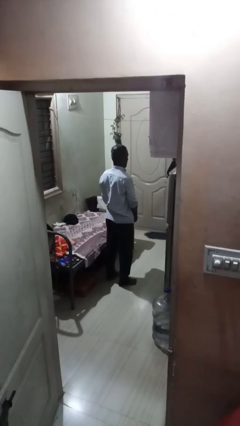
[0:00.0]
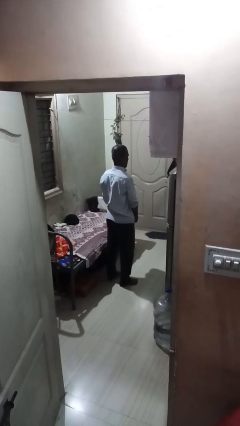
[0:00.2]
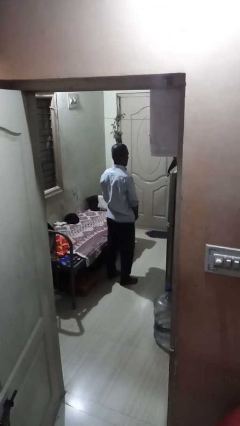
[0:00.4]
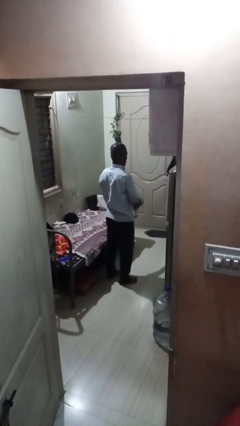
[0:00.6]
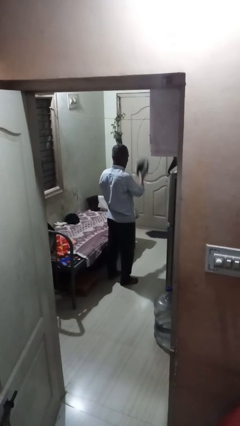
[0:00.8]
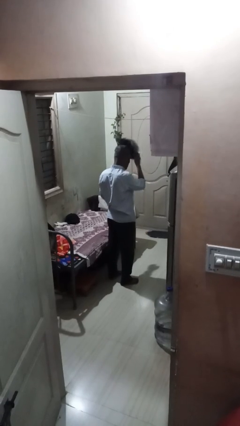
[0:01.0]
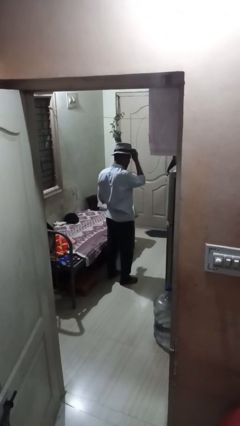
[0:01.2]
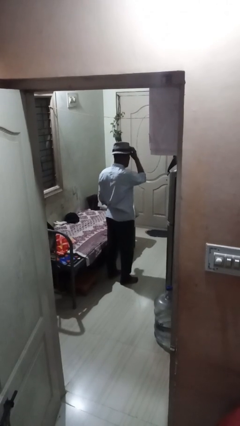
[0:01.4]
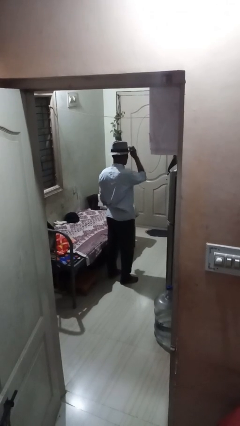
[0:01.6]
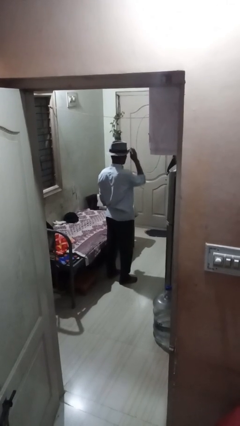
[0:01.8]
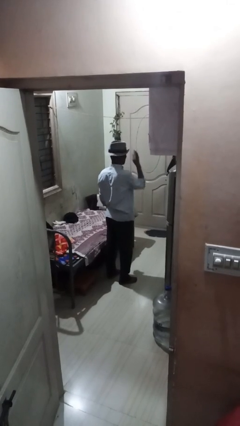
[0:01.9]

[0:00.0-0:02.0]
person puts on hat

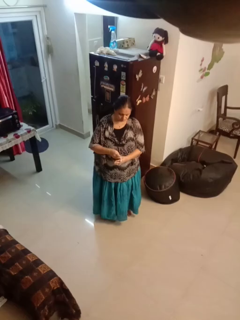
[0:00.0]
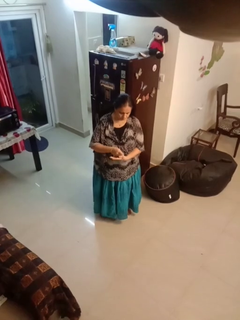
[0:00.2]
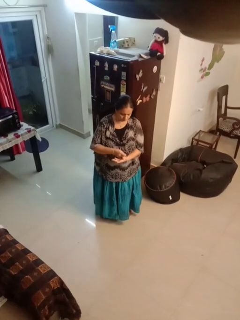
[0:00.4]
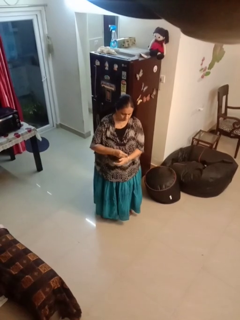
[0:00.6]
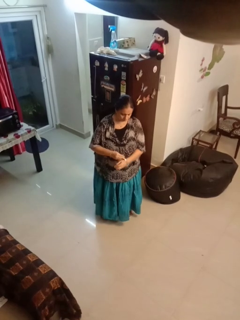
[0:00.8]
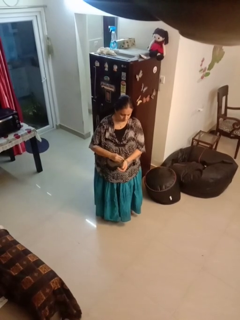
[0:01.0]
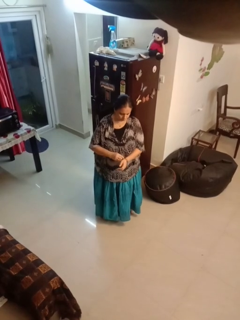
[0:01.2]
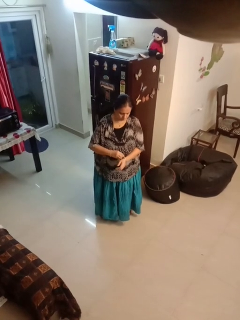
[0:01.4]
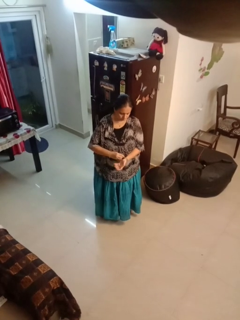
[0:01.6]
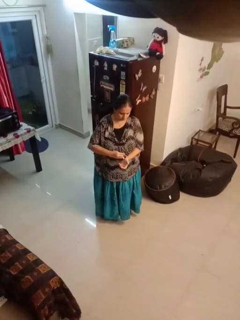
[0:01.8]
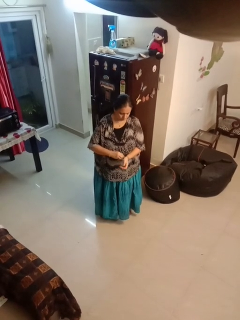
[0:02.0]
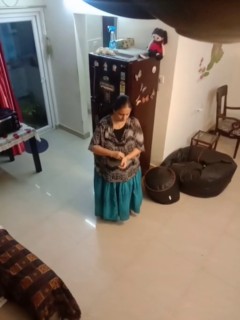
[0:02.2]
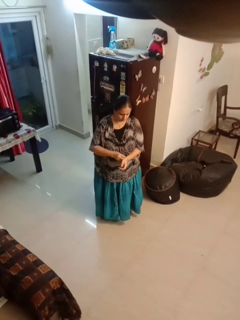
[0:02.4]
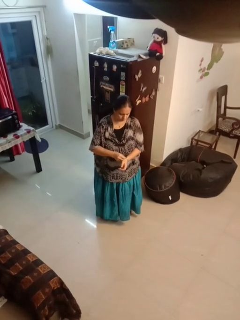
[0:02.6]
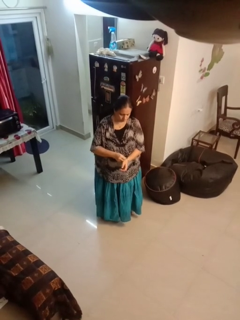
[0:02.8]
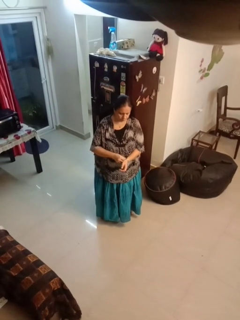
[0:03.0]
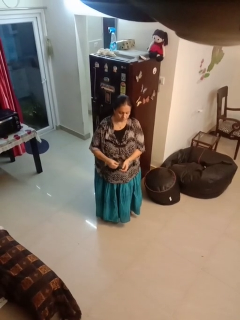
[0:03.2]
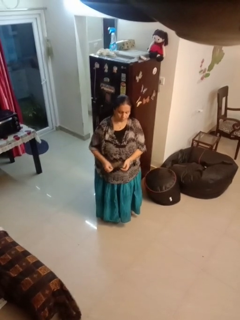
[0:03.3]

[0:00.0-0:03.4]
person puts on wristwatch

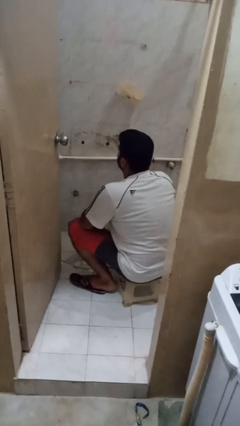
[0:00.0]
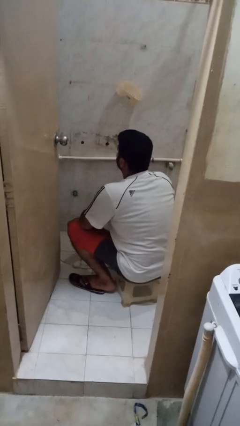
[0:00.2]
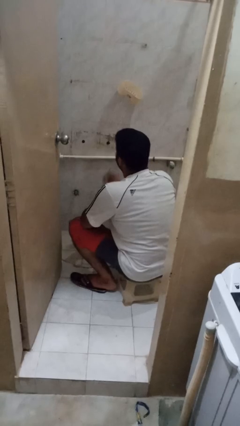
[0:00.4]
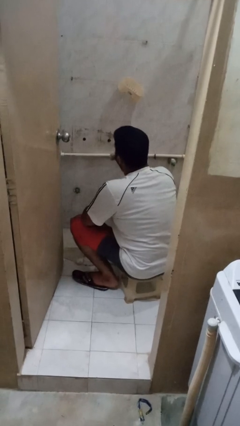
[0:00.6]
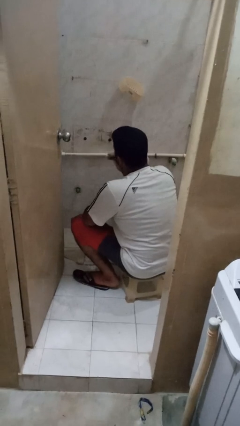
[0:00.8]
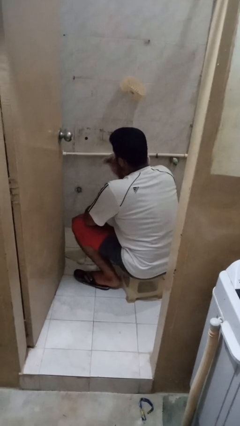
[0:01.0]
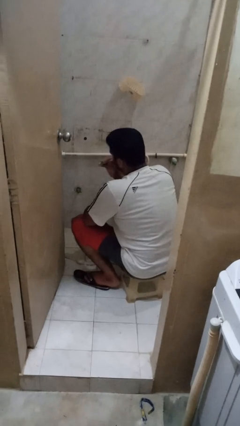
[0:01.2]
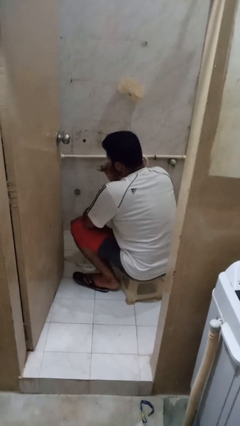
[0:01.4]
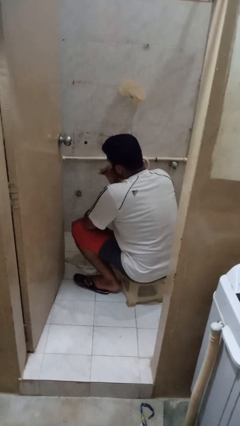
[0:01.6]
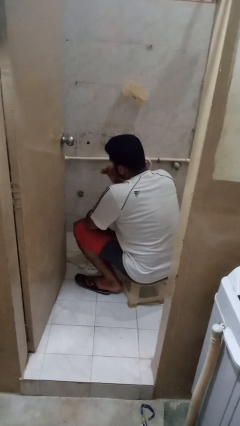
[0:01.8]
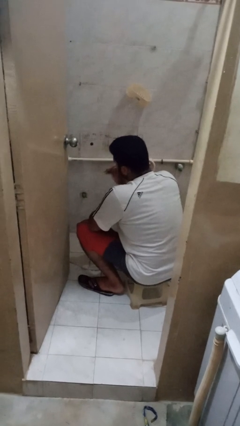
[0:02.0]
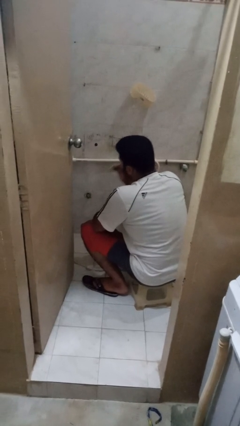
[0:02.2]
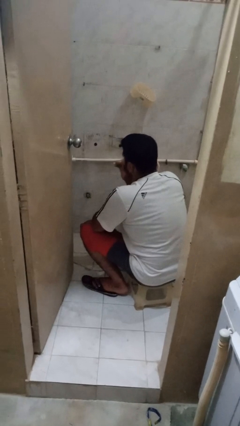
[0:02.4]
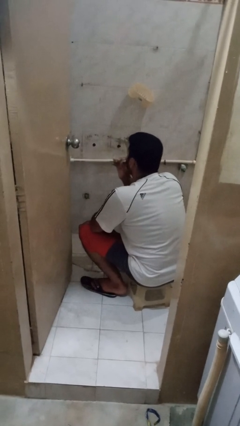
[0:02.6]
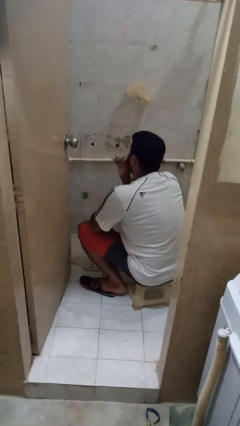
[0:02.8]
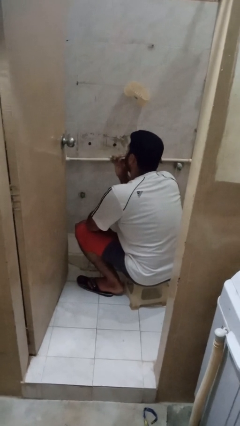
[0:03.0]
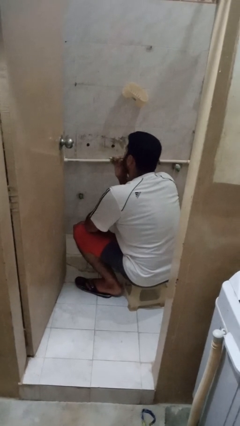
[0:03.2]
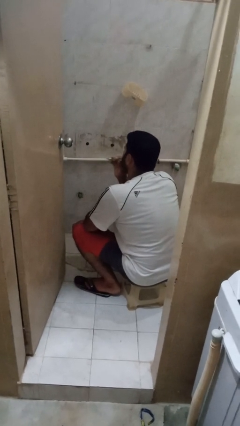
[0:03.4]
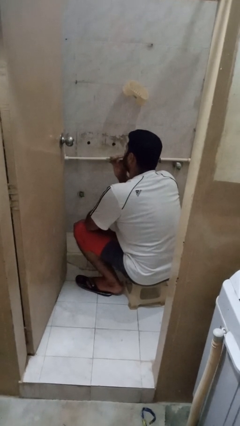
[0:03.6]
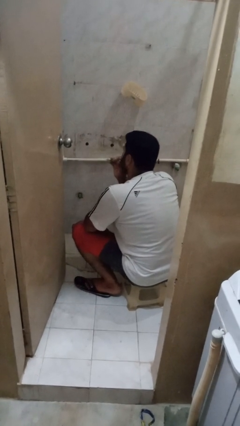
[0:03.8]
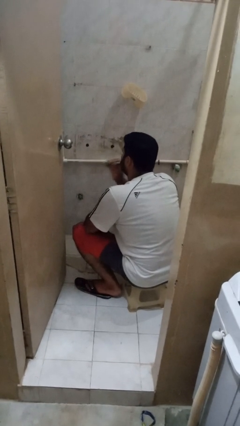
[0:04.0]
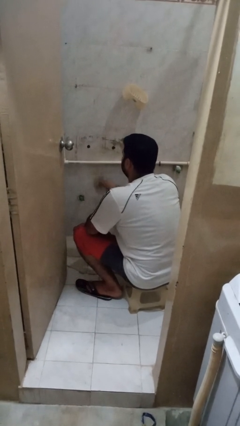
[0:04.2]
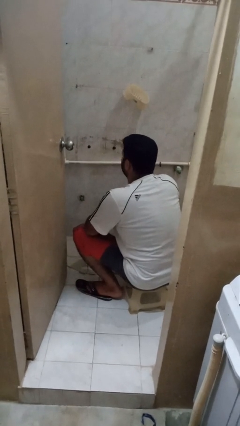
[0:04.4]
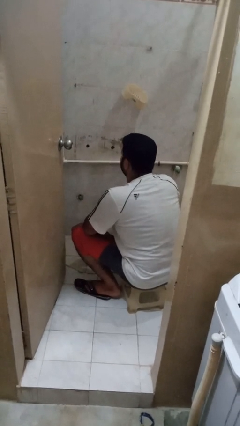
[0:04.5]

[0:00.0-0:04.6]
person brushes teeth

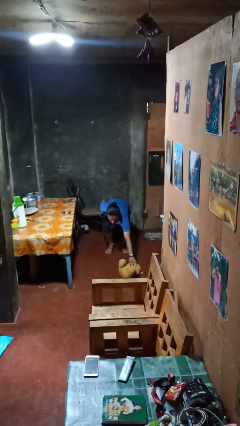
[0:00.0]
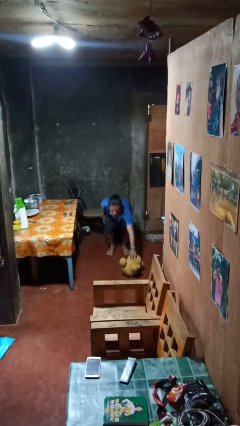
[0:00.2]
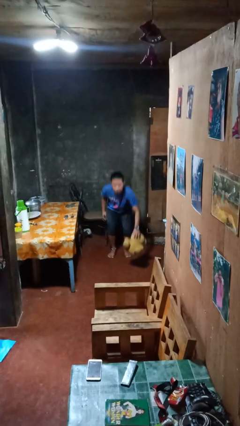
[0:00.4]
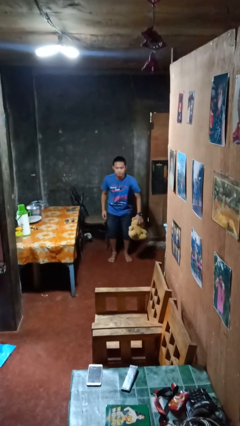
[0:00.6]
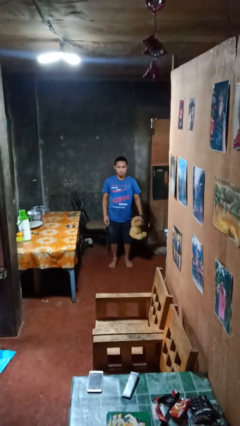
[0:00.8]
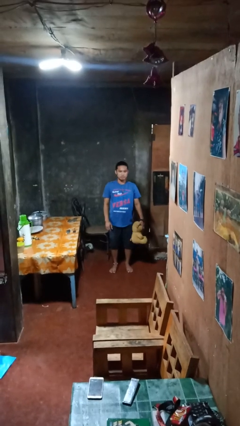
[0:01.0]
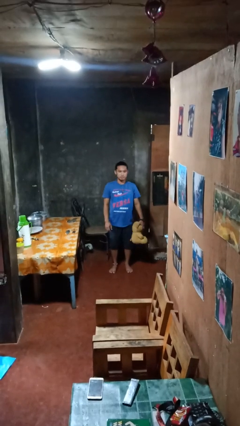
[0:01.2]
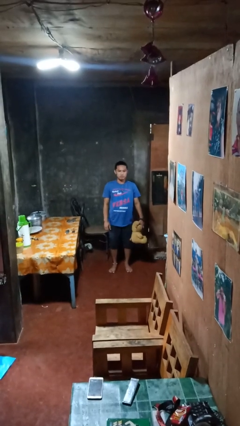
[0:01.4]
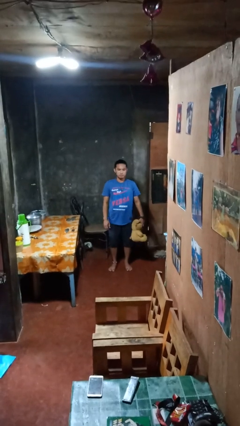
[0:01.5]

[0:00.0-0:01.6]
person picks up object from floor

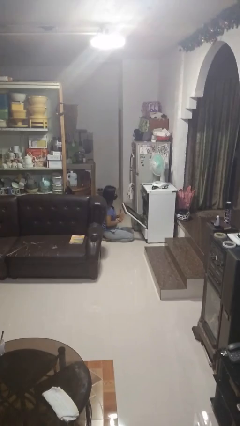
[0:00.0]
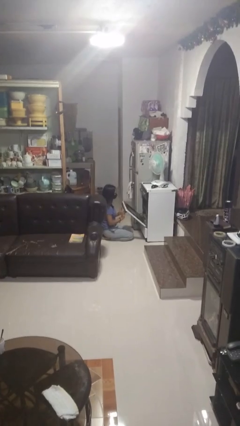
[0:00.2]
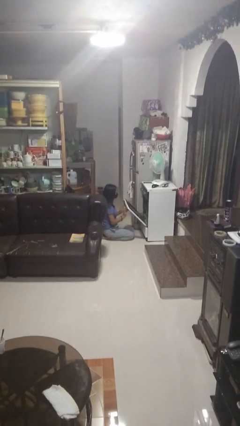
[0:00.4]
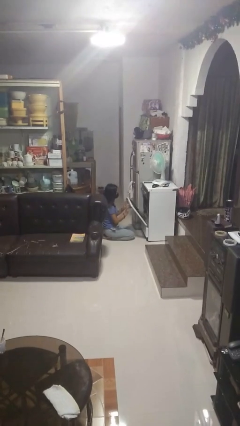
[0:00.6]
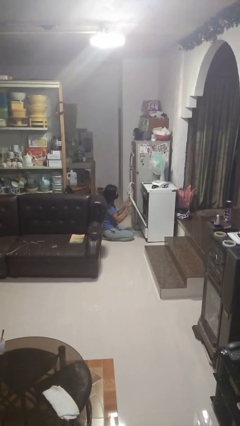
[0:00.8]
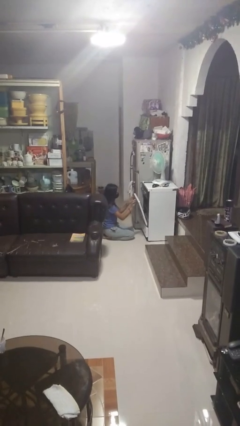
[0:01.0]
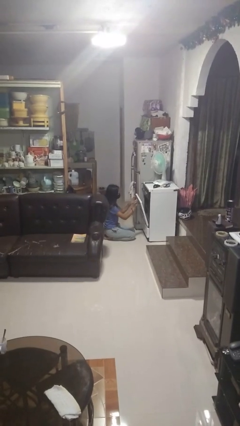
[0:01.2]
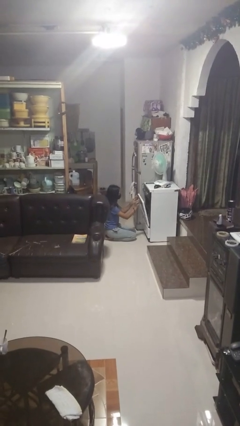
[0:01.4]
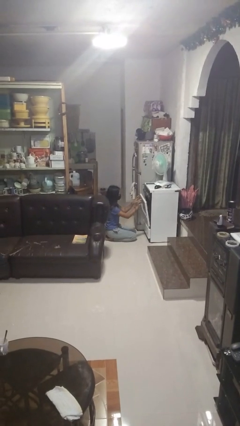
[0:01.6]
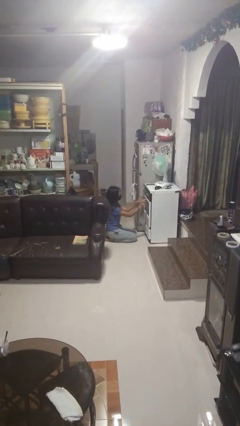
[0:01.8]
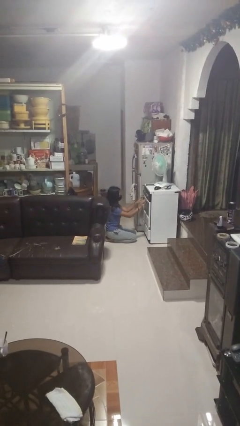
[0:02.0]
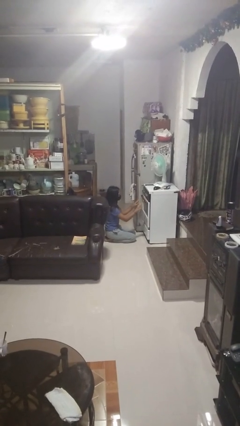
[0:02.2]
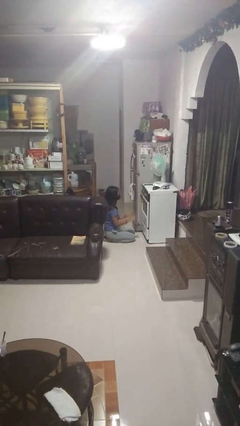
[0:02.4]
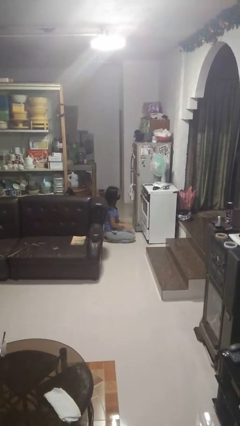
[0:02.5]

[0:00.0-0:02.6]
person closes oven door

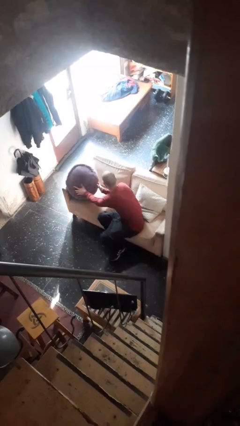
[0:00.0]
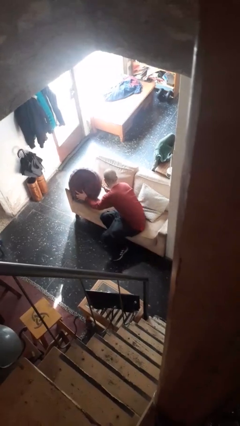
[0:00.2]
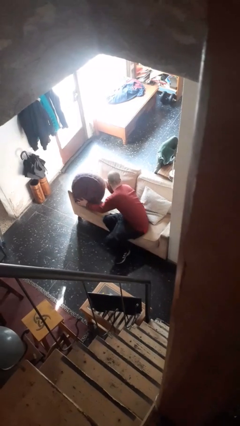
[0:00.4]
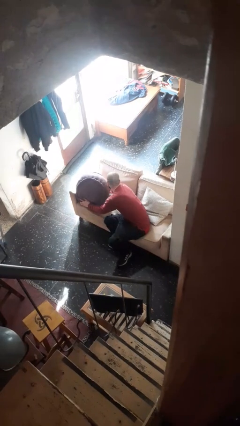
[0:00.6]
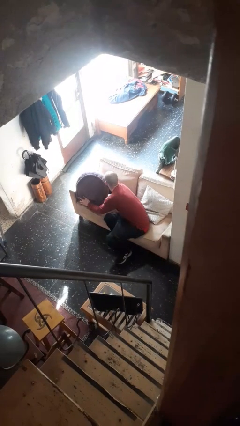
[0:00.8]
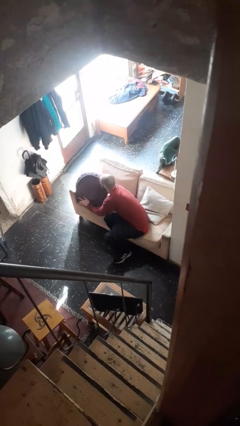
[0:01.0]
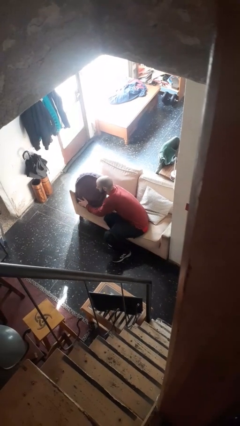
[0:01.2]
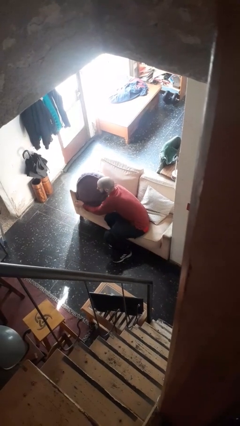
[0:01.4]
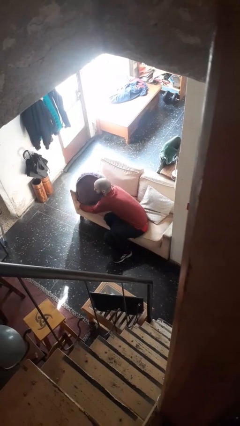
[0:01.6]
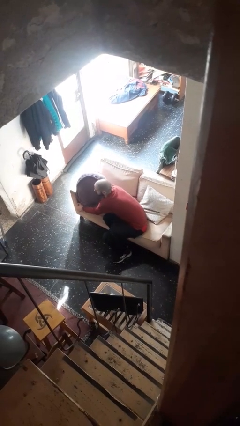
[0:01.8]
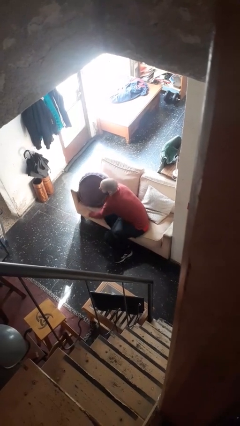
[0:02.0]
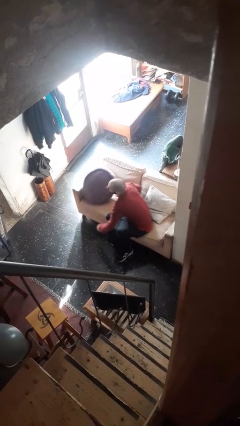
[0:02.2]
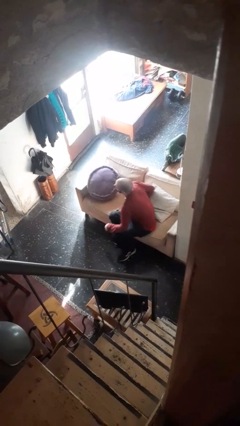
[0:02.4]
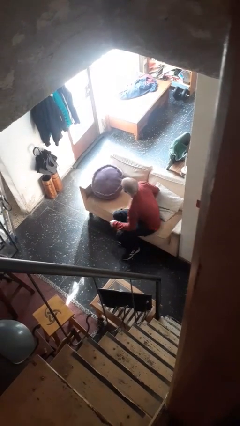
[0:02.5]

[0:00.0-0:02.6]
person searches in couch

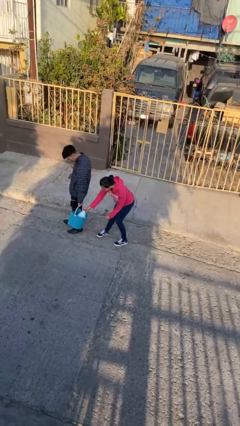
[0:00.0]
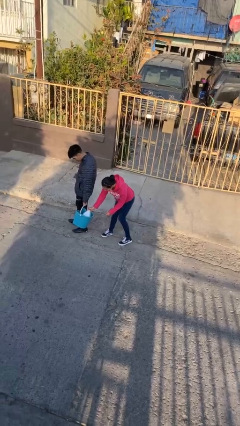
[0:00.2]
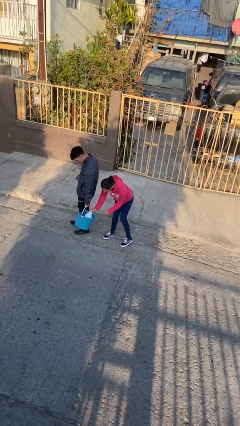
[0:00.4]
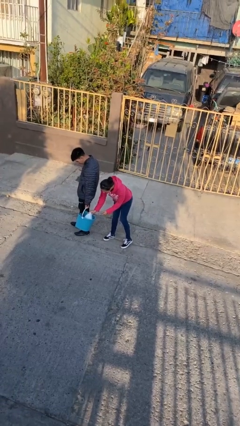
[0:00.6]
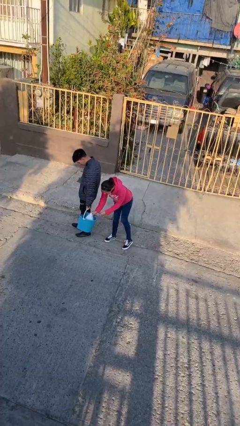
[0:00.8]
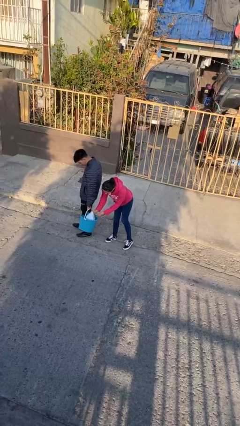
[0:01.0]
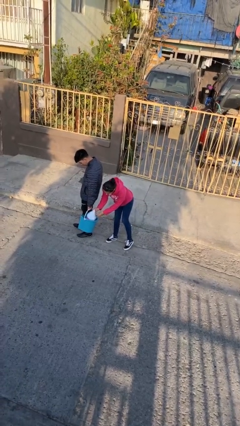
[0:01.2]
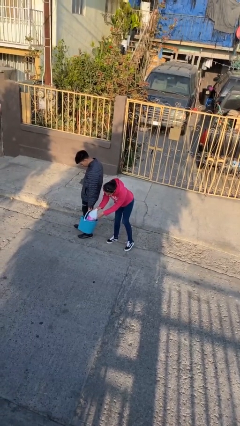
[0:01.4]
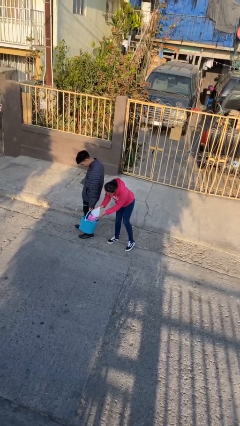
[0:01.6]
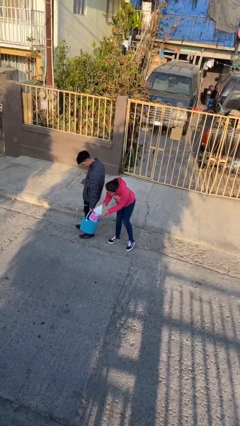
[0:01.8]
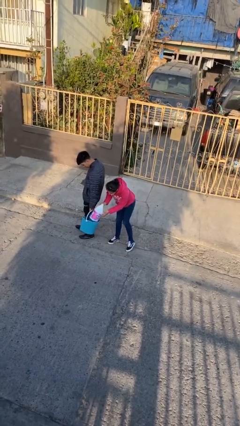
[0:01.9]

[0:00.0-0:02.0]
person steals object from person
